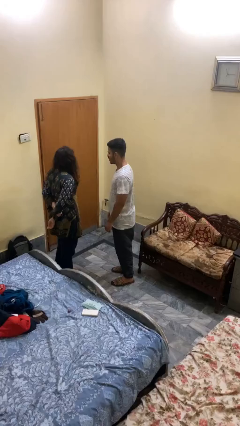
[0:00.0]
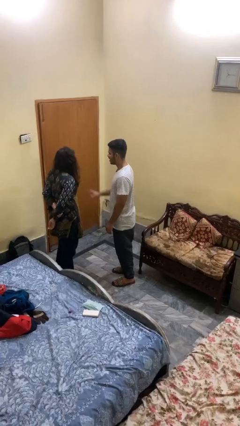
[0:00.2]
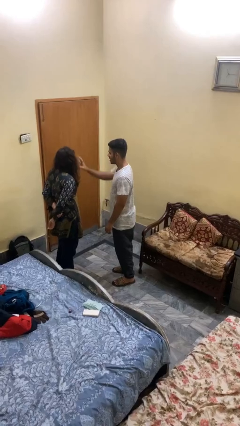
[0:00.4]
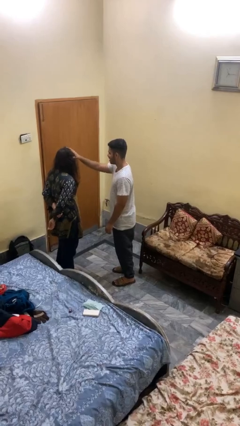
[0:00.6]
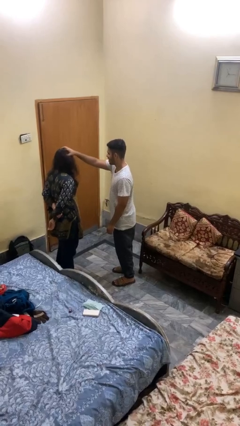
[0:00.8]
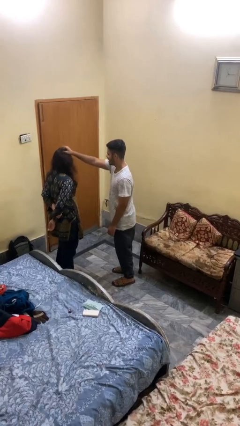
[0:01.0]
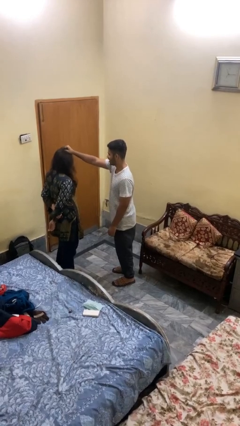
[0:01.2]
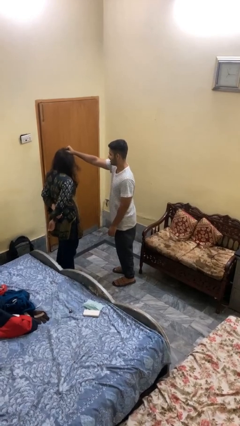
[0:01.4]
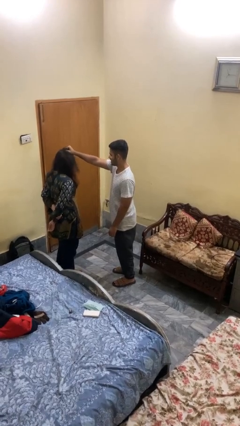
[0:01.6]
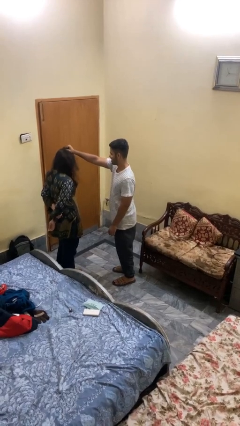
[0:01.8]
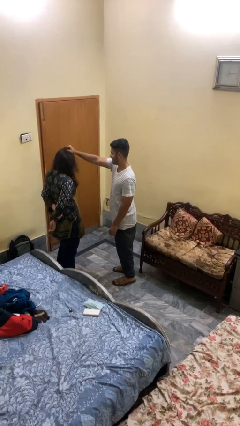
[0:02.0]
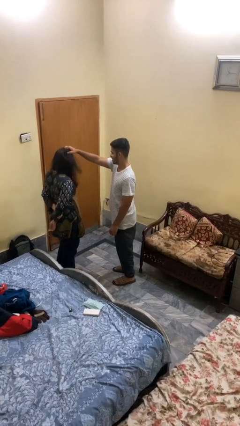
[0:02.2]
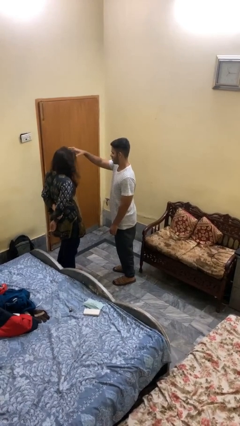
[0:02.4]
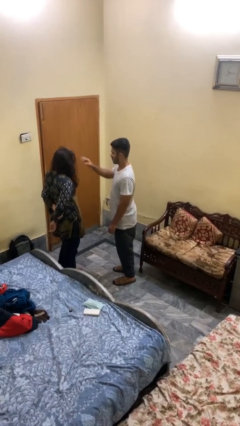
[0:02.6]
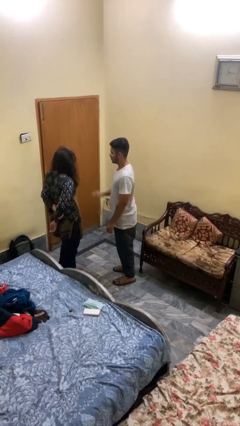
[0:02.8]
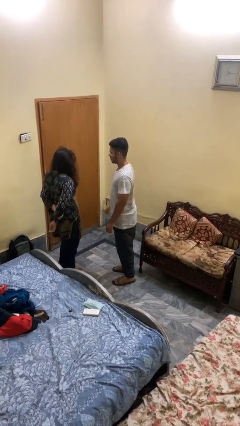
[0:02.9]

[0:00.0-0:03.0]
person grabs person by hair

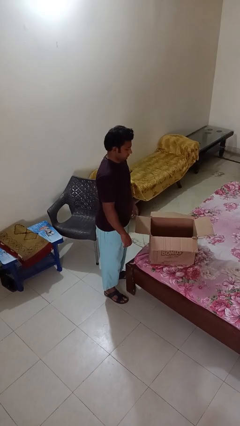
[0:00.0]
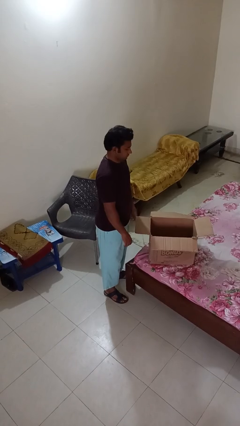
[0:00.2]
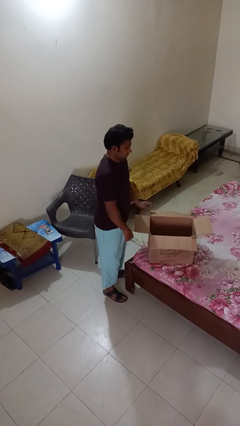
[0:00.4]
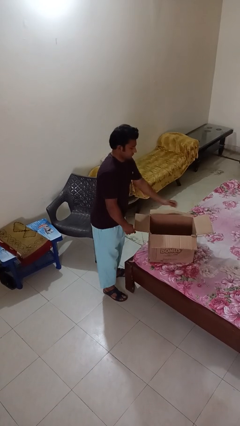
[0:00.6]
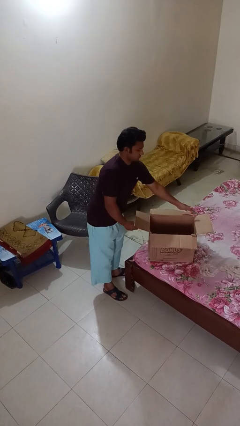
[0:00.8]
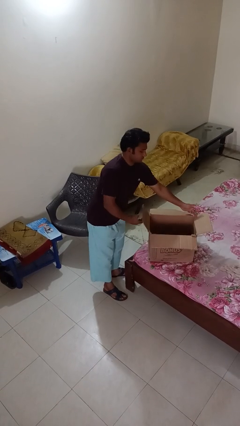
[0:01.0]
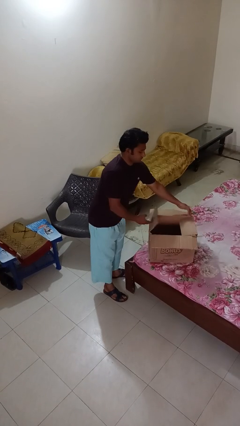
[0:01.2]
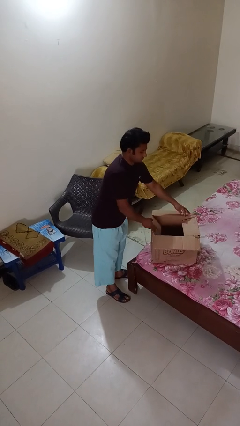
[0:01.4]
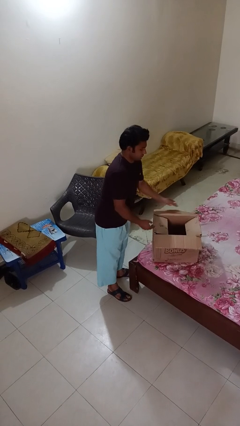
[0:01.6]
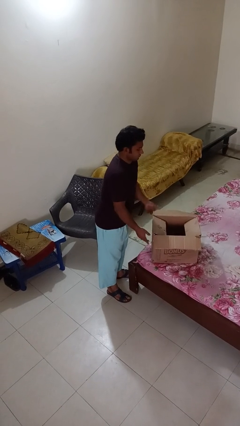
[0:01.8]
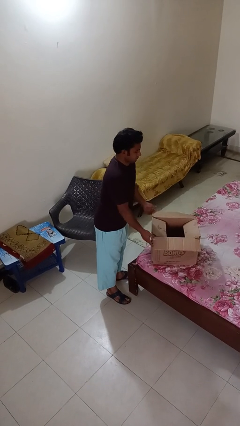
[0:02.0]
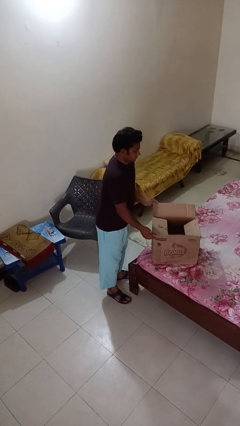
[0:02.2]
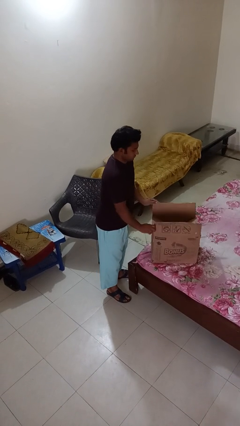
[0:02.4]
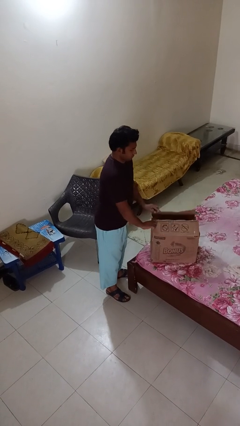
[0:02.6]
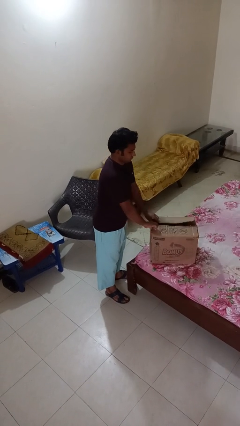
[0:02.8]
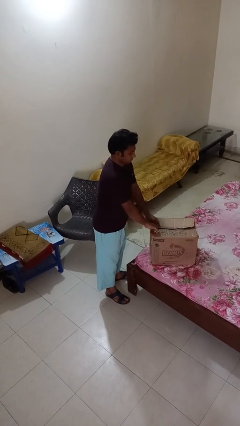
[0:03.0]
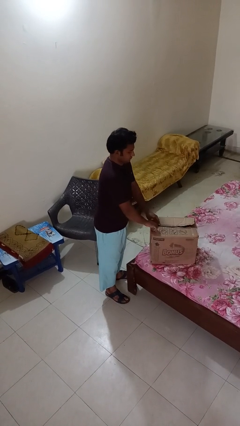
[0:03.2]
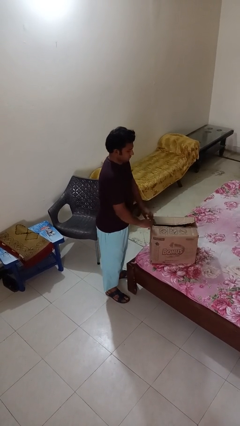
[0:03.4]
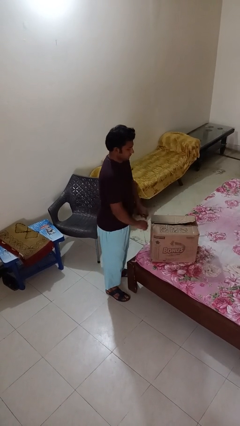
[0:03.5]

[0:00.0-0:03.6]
person closes box

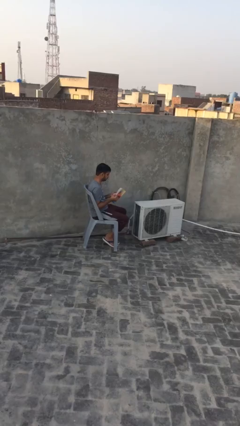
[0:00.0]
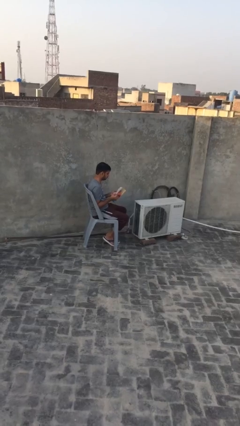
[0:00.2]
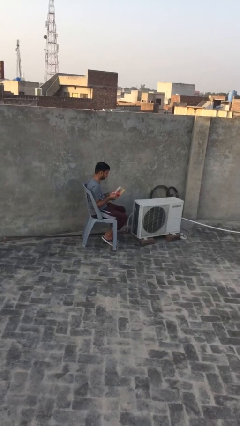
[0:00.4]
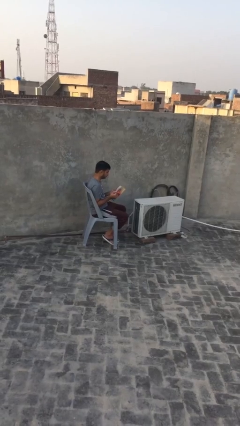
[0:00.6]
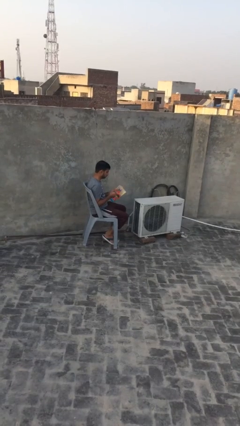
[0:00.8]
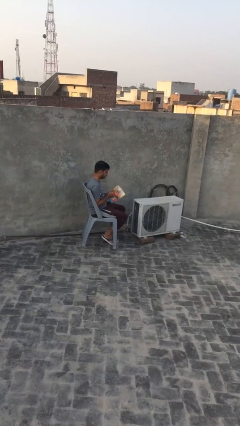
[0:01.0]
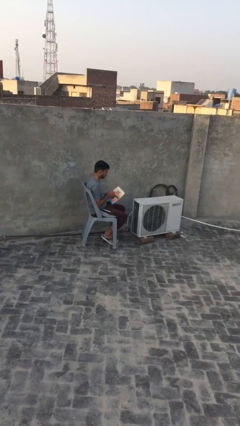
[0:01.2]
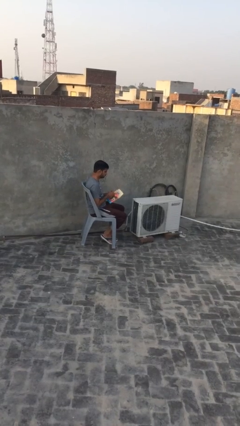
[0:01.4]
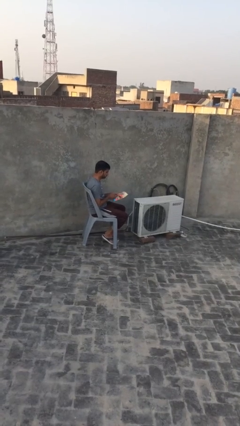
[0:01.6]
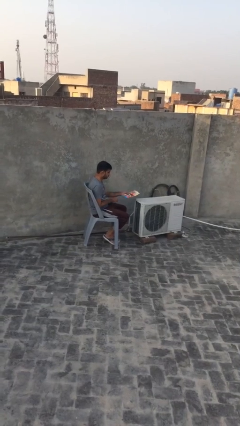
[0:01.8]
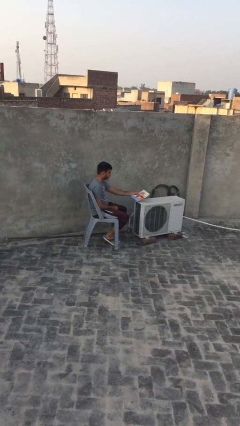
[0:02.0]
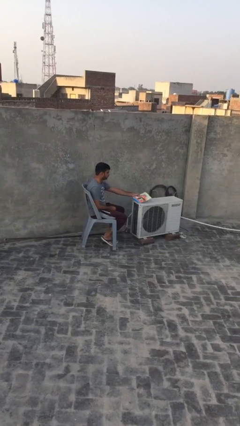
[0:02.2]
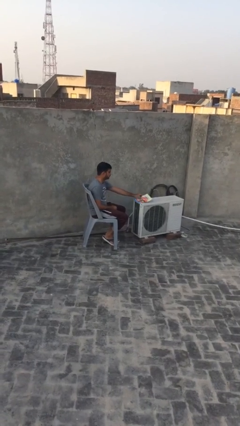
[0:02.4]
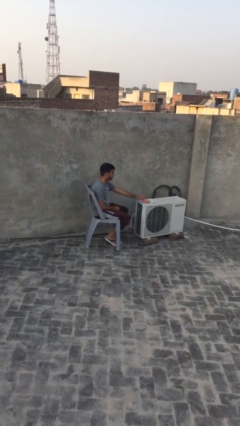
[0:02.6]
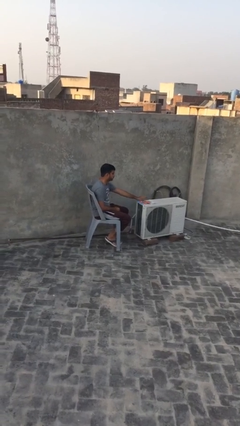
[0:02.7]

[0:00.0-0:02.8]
person puts down object on table

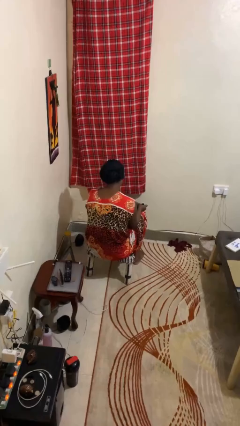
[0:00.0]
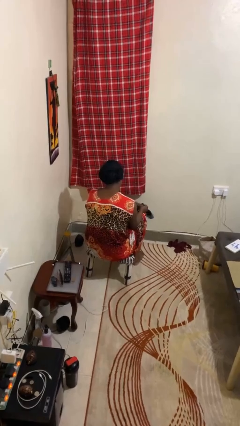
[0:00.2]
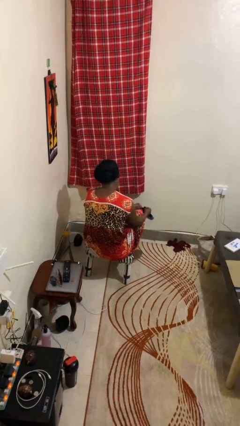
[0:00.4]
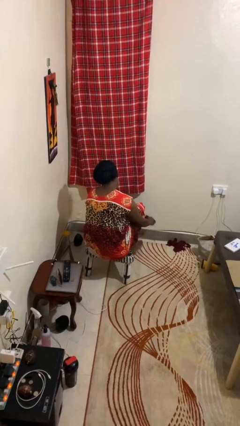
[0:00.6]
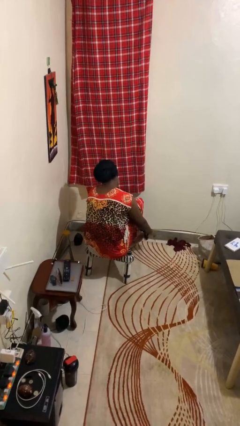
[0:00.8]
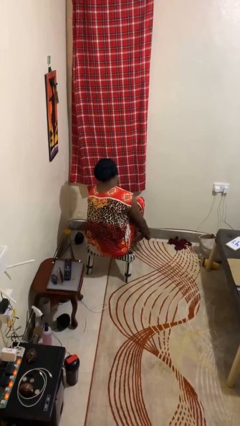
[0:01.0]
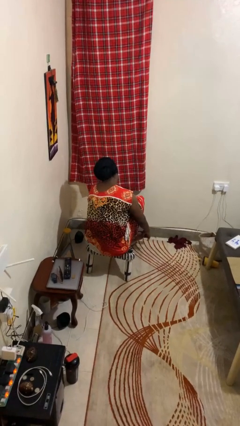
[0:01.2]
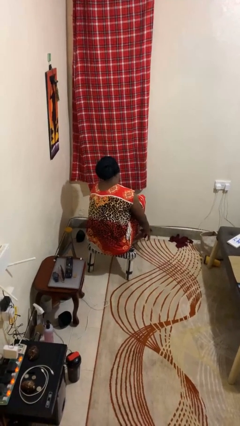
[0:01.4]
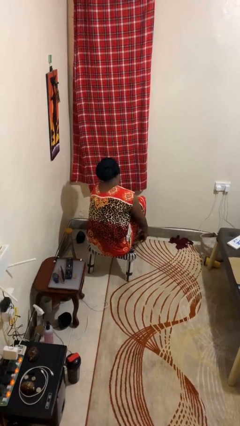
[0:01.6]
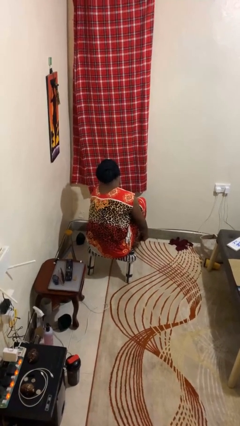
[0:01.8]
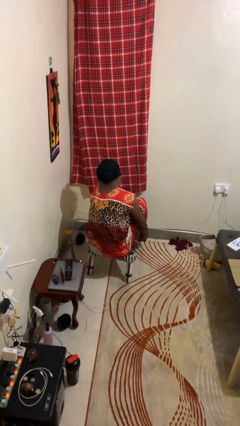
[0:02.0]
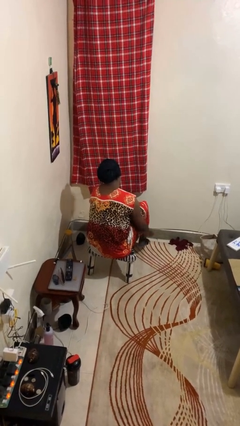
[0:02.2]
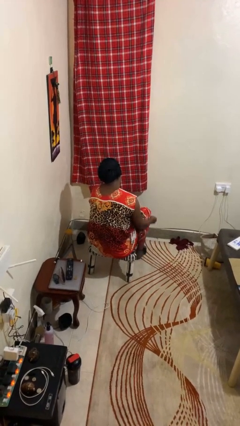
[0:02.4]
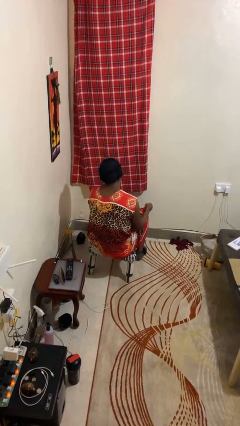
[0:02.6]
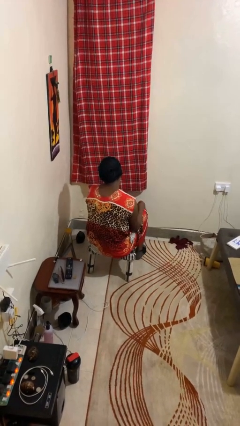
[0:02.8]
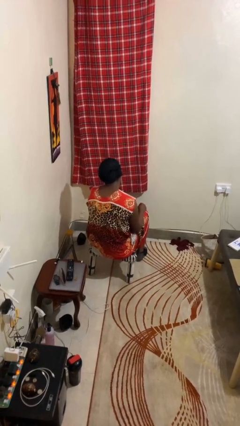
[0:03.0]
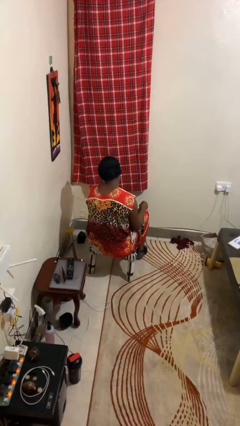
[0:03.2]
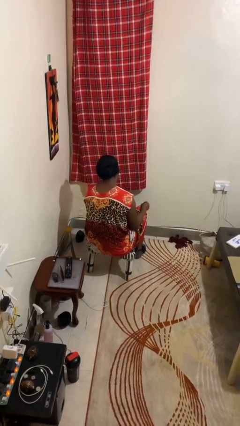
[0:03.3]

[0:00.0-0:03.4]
person puts on socks

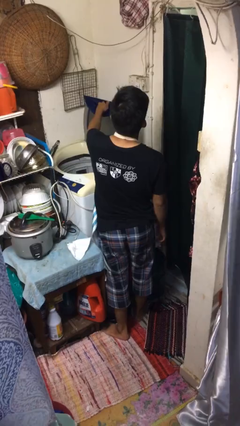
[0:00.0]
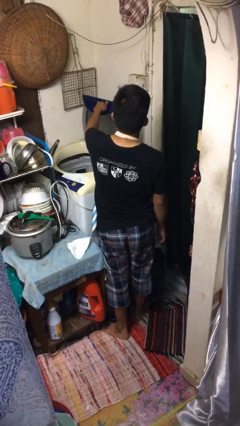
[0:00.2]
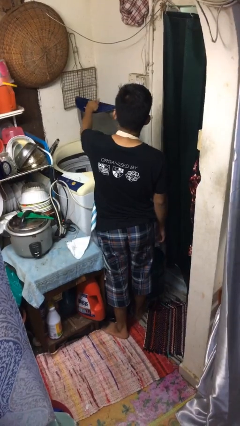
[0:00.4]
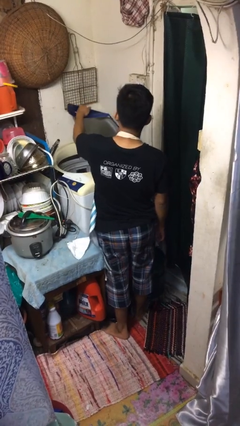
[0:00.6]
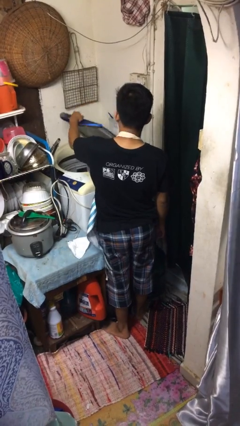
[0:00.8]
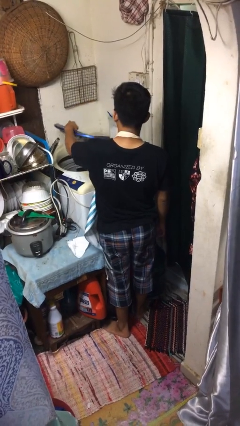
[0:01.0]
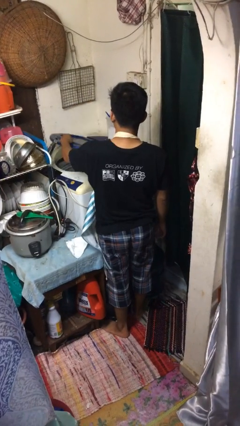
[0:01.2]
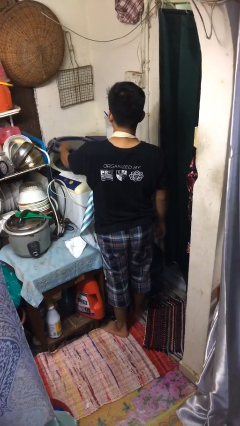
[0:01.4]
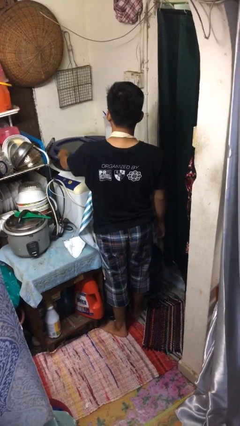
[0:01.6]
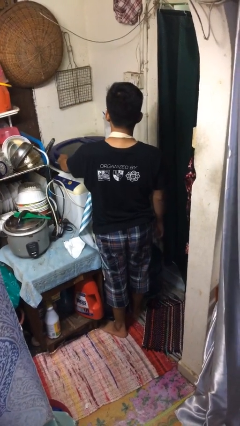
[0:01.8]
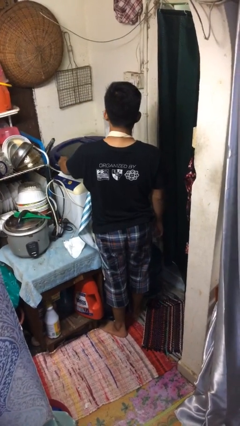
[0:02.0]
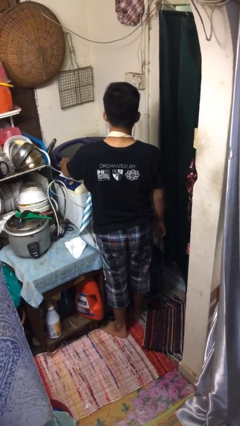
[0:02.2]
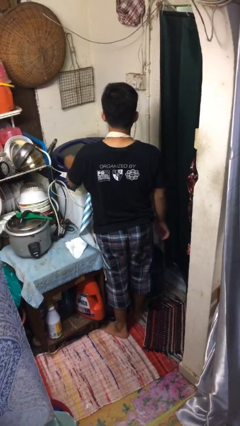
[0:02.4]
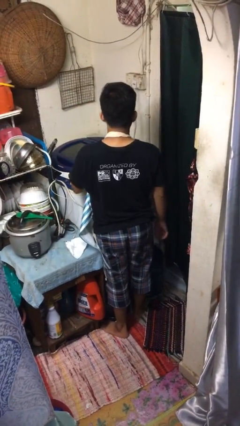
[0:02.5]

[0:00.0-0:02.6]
person closes clothes washer

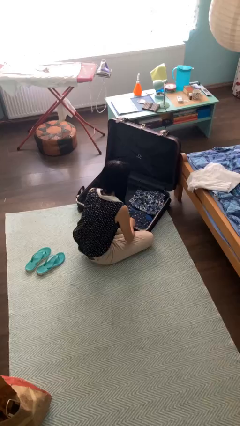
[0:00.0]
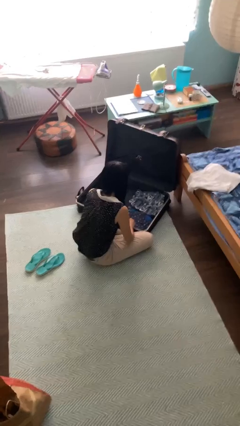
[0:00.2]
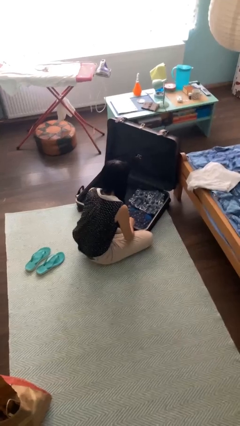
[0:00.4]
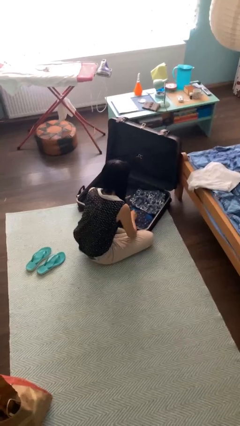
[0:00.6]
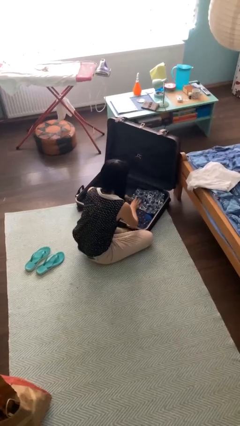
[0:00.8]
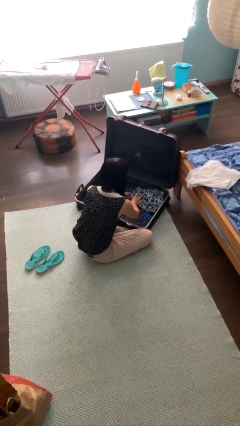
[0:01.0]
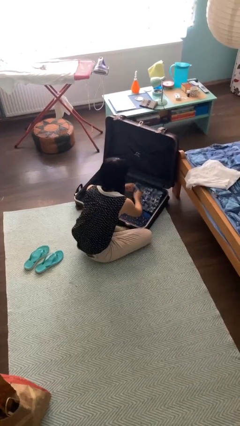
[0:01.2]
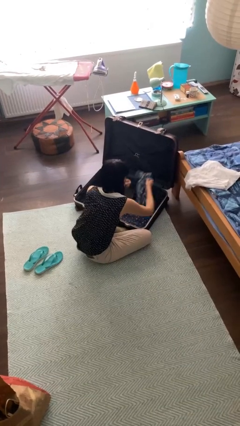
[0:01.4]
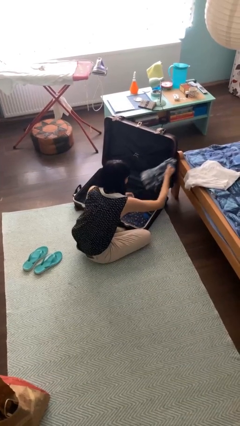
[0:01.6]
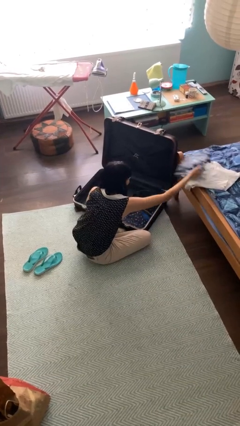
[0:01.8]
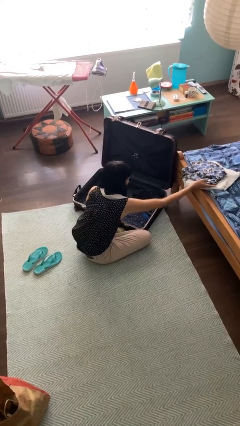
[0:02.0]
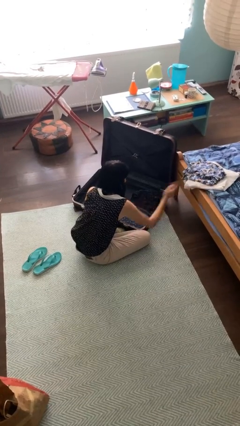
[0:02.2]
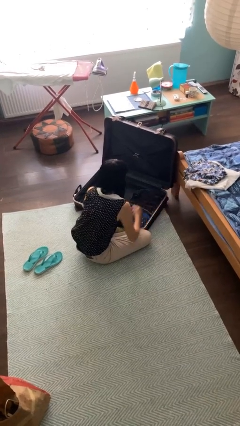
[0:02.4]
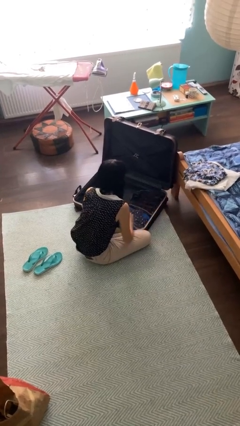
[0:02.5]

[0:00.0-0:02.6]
person unloads clothes from suitcase
